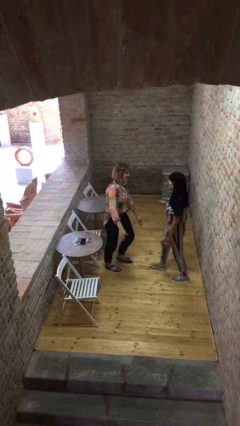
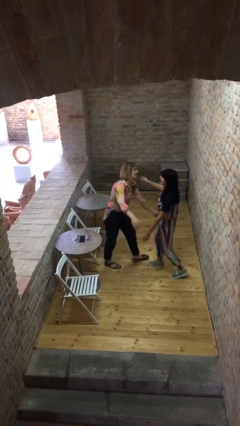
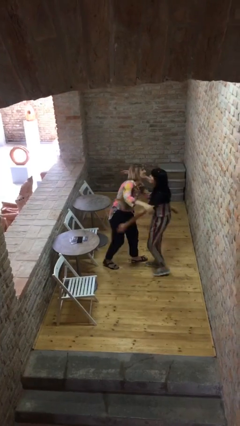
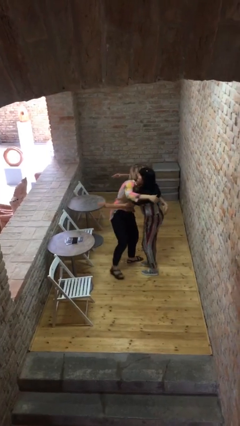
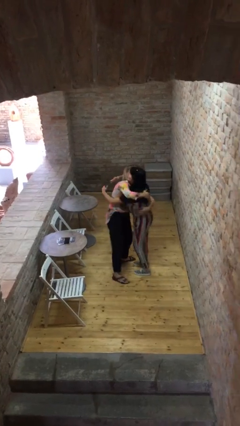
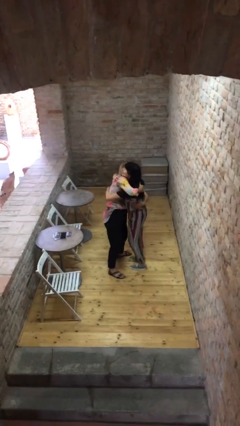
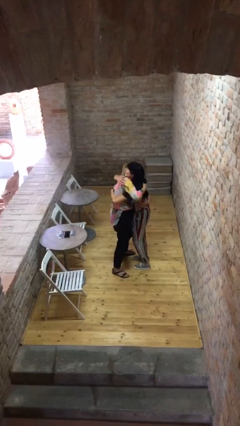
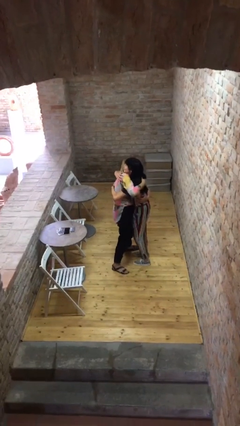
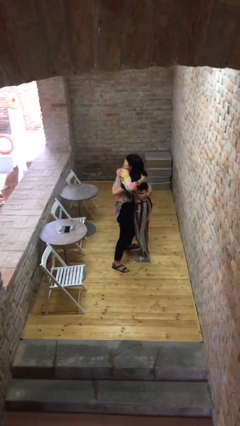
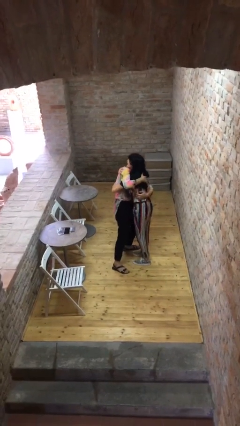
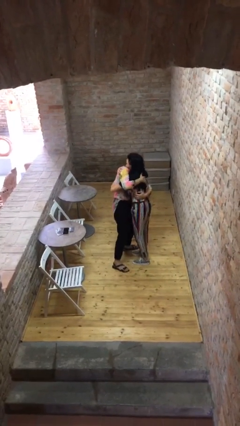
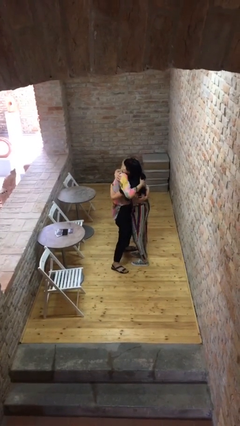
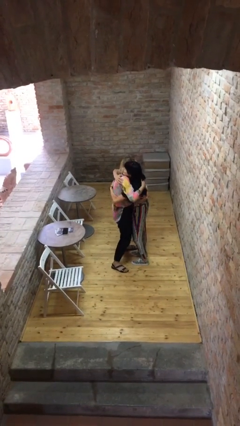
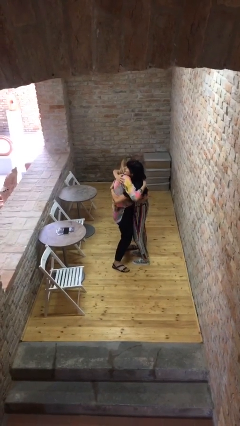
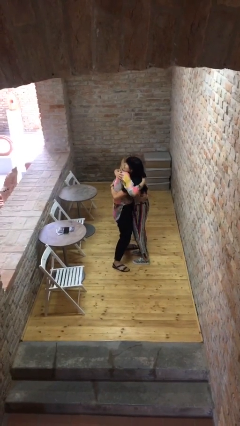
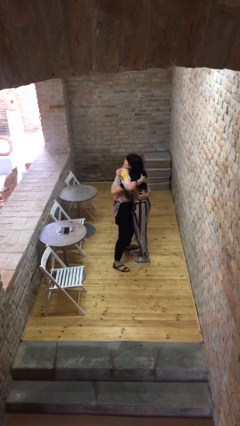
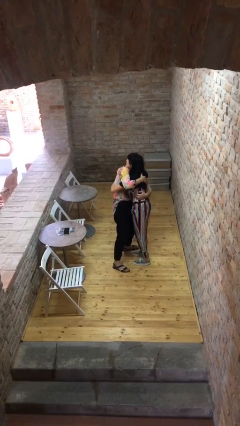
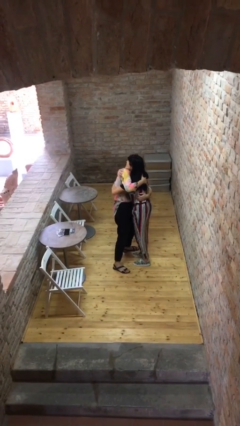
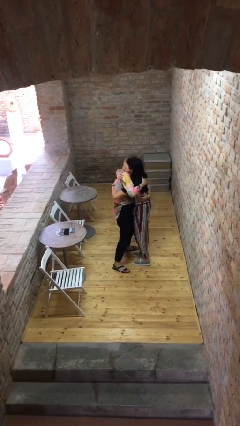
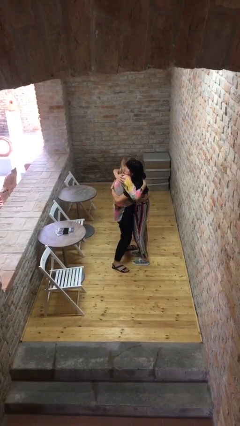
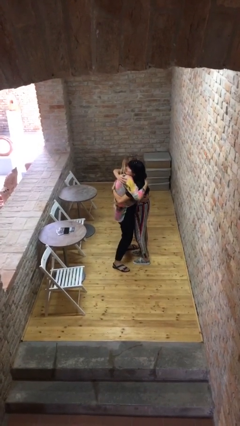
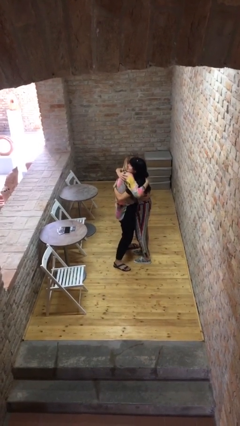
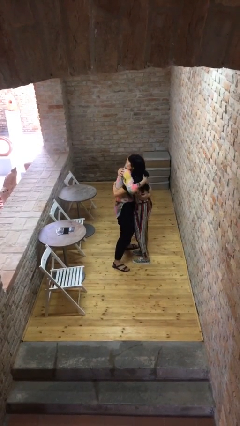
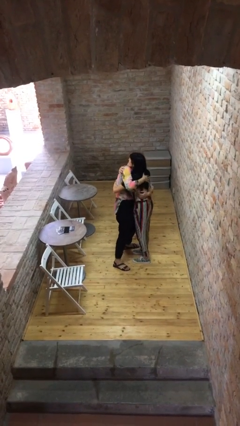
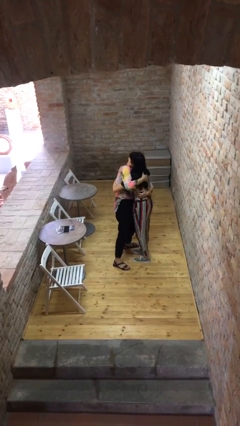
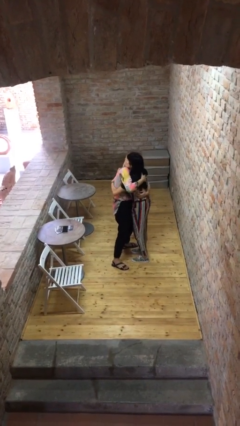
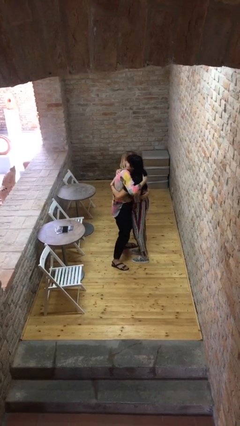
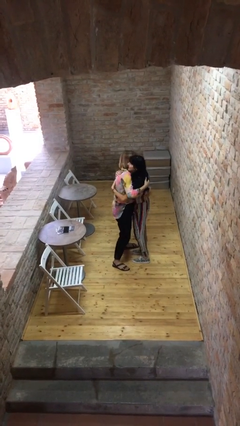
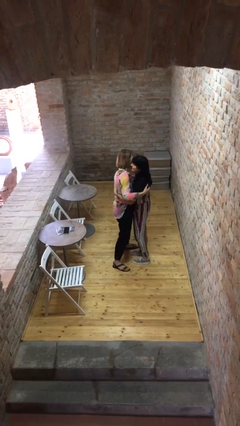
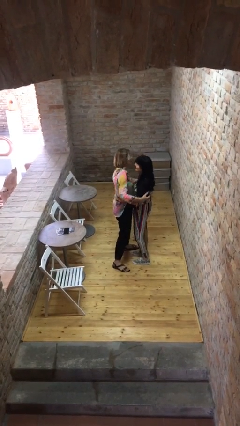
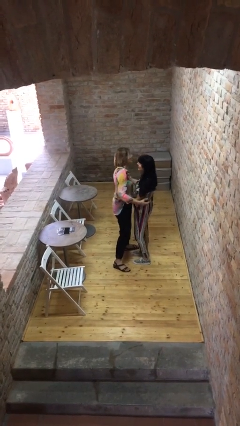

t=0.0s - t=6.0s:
person embraces person

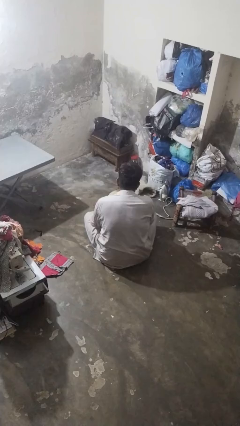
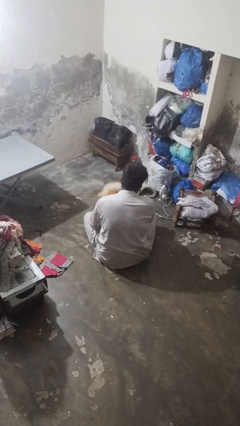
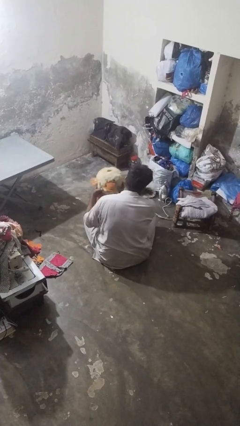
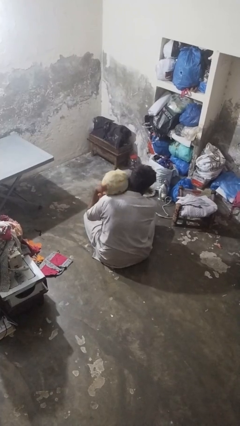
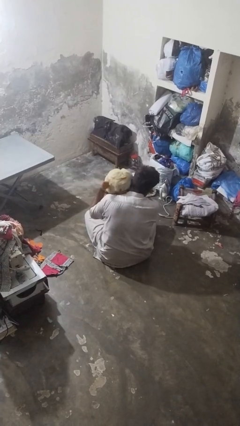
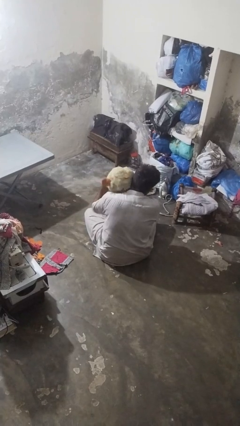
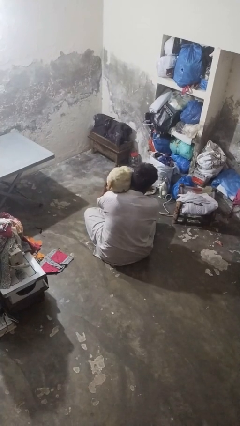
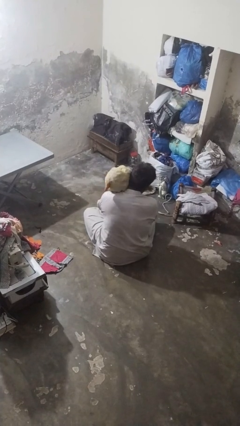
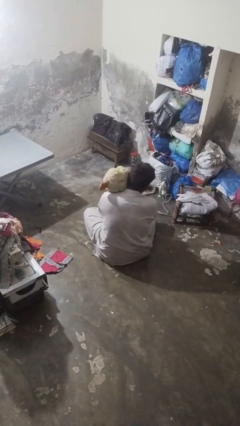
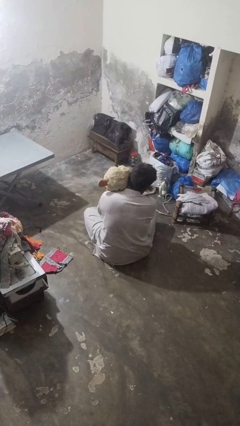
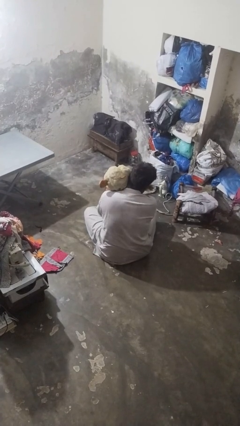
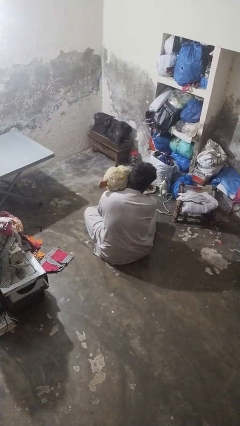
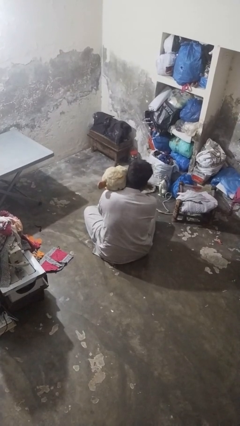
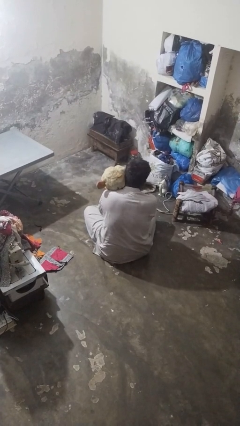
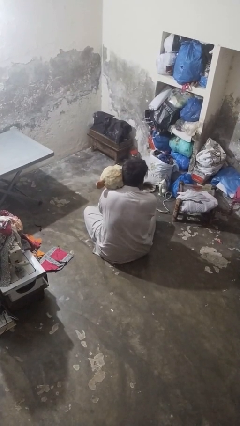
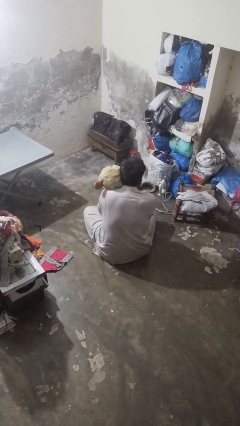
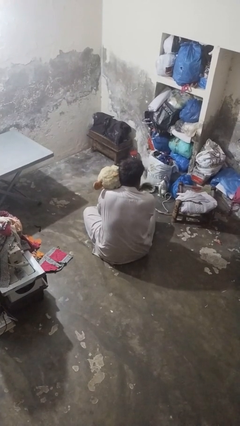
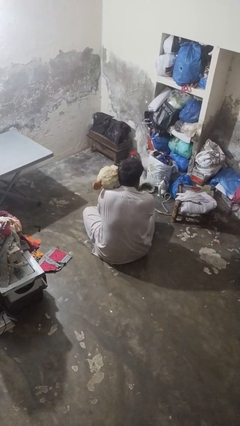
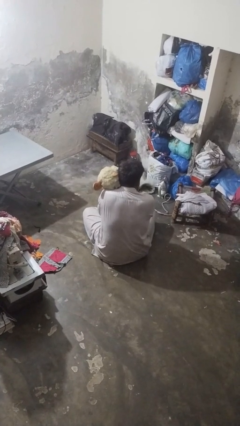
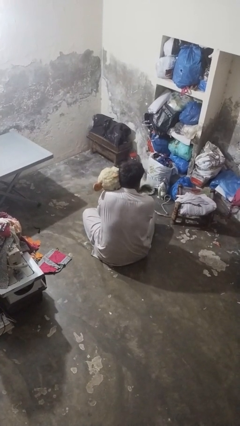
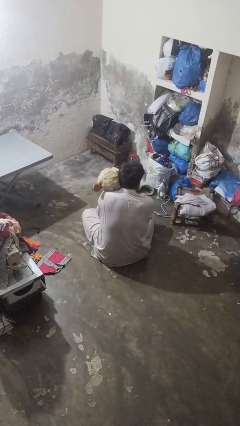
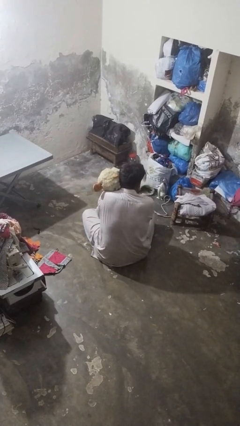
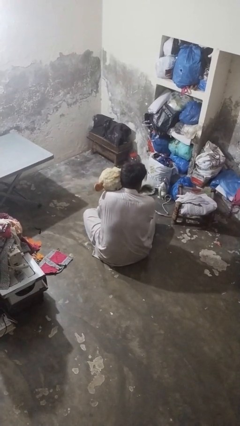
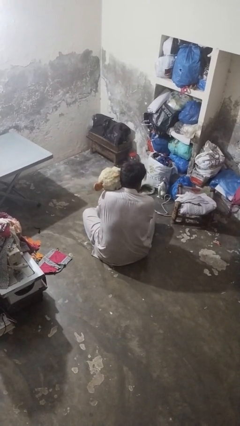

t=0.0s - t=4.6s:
person hugs stuffed animal

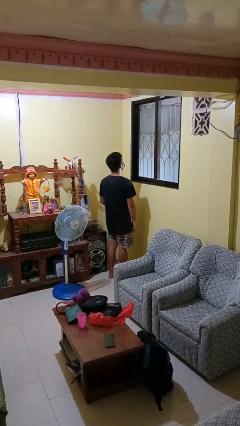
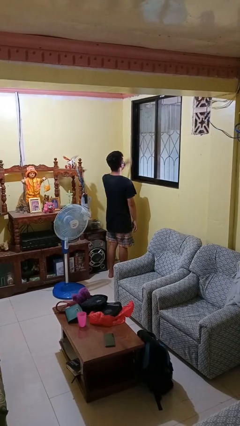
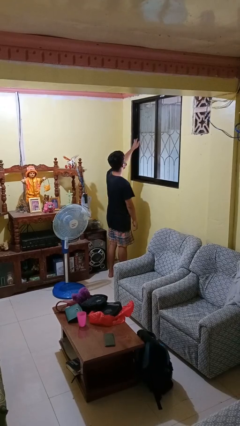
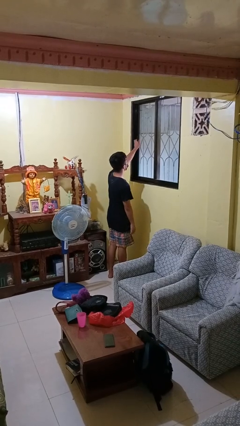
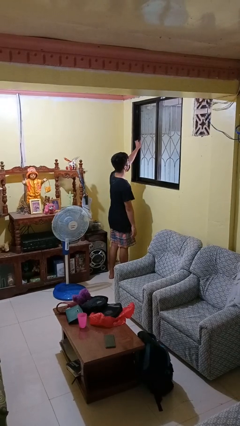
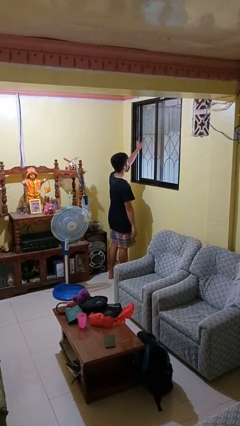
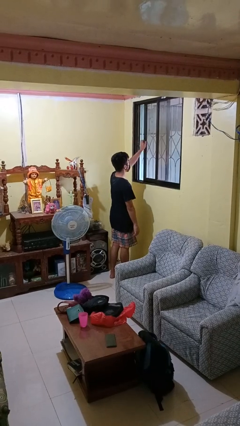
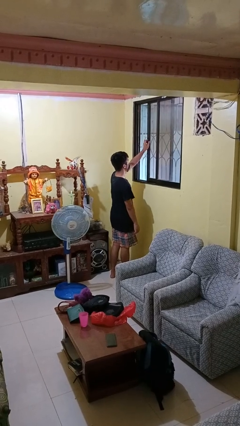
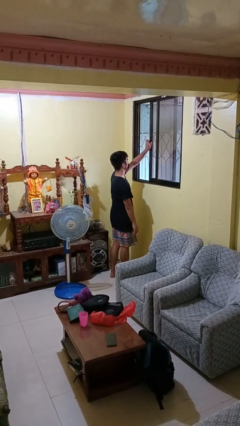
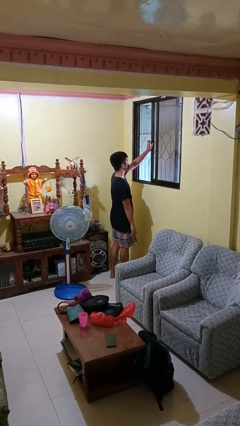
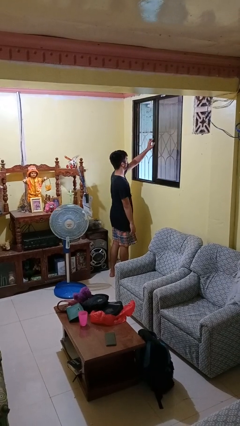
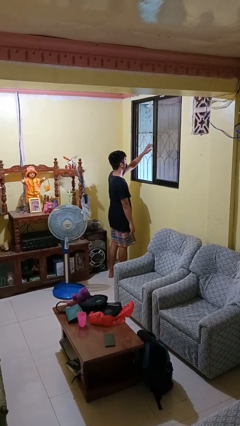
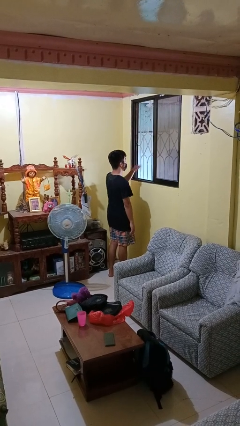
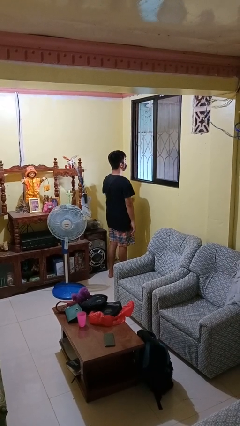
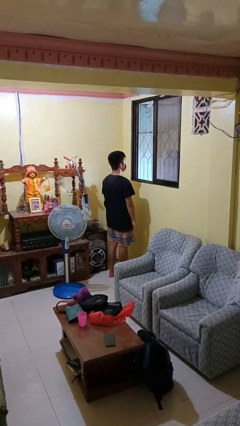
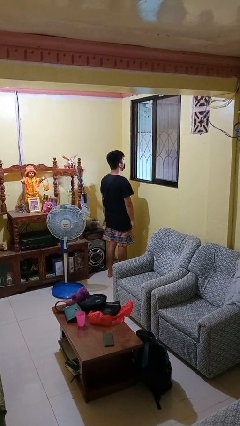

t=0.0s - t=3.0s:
person opens home window

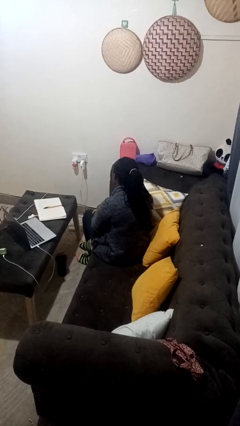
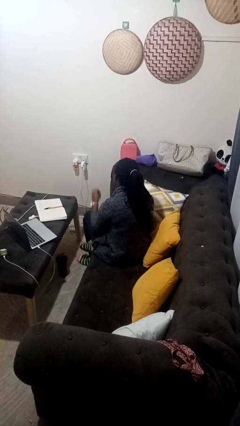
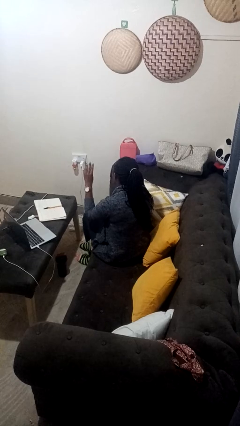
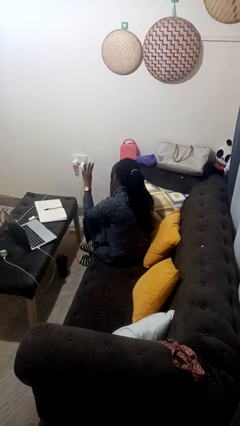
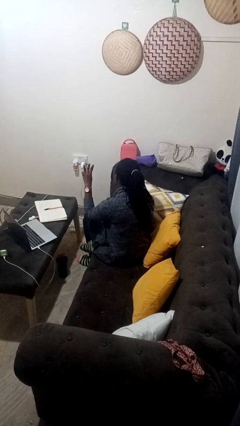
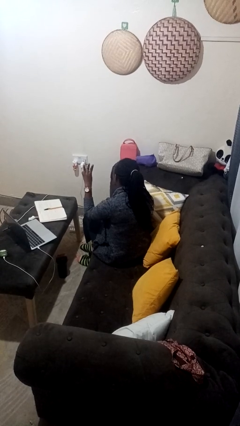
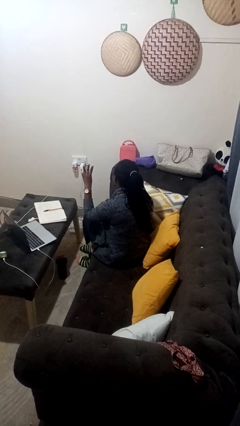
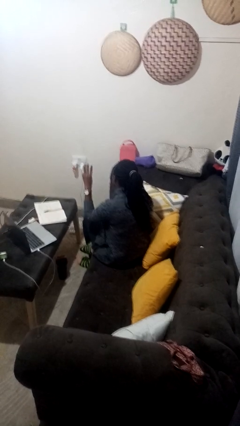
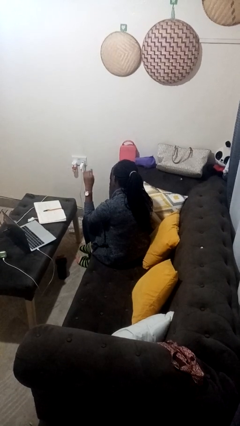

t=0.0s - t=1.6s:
person gestures number three

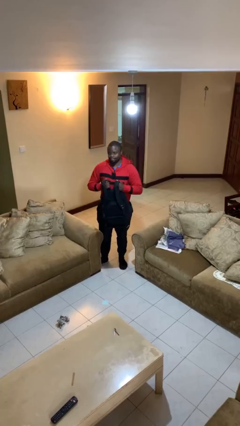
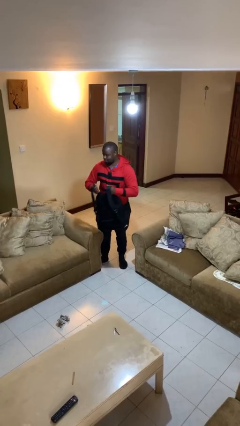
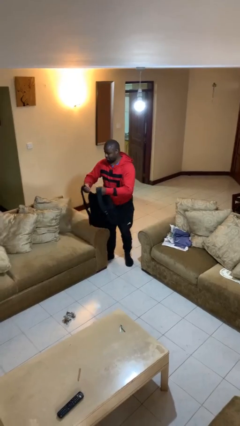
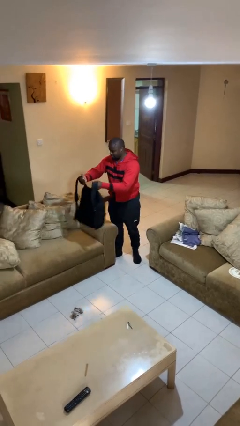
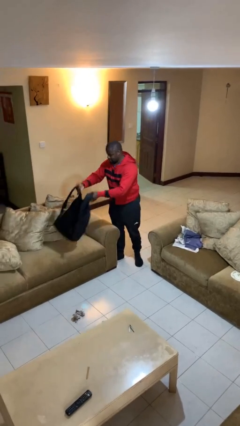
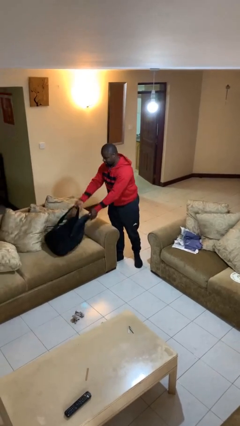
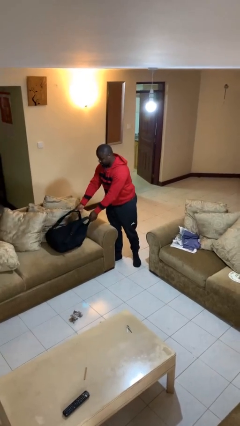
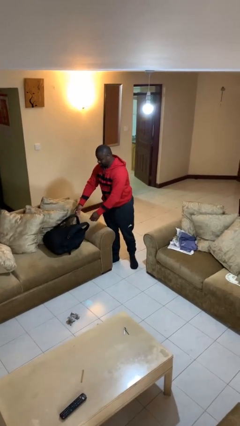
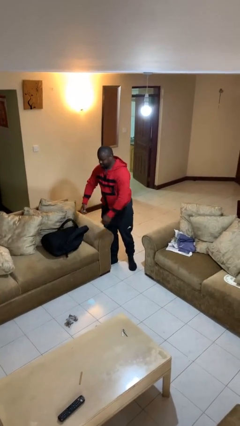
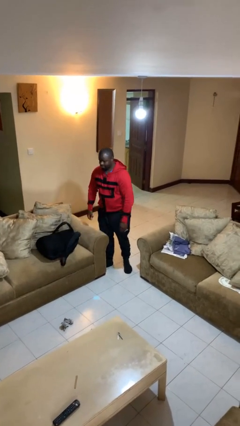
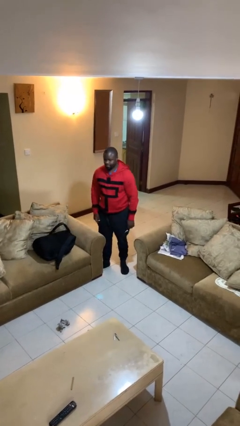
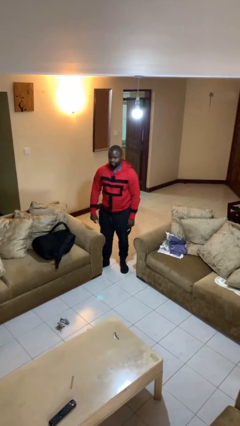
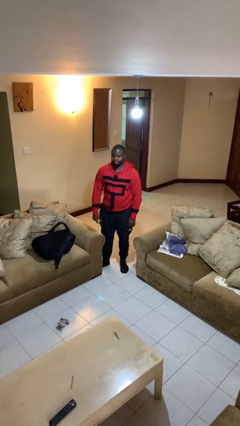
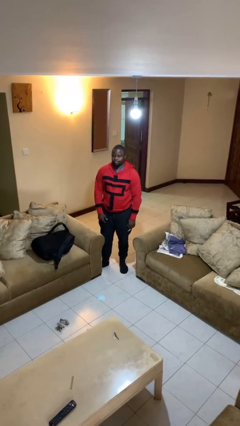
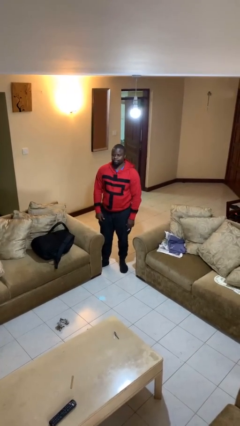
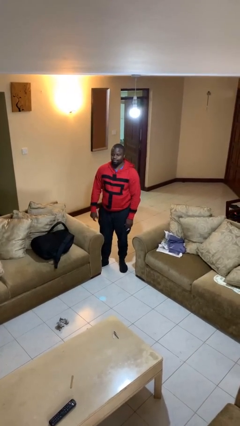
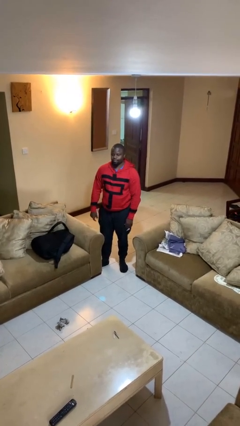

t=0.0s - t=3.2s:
person puts down object on couch
